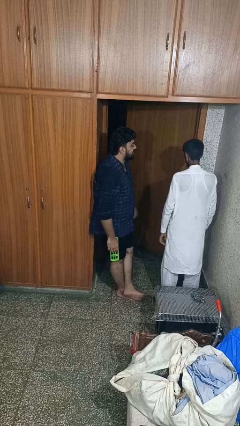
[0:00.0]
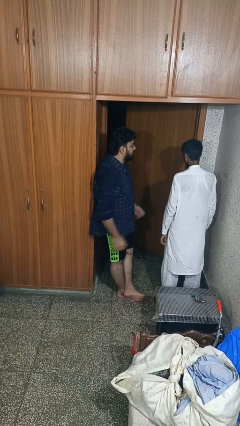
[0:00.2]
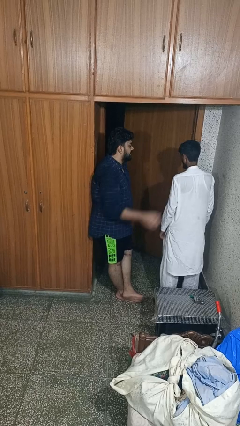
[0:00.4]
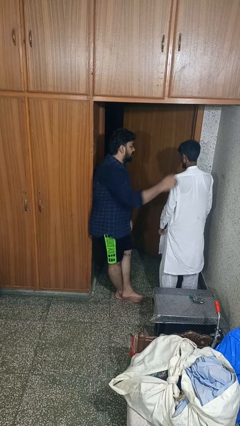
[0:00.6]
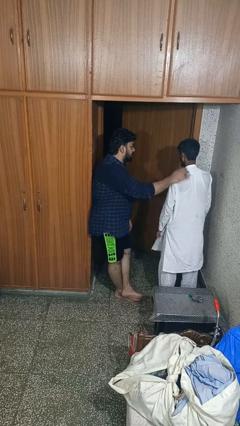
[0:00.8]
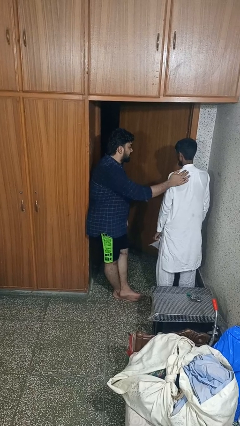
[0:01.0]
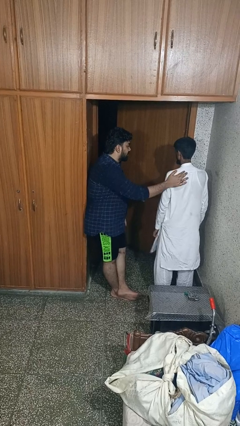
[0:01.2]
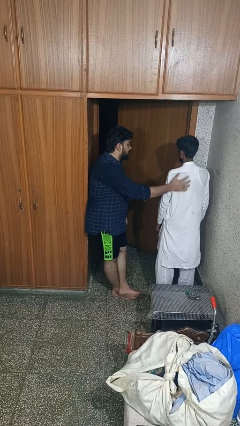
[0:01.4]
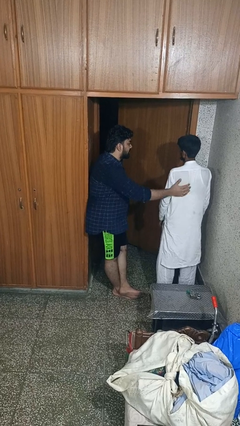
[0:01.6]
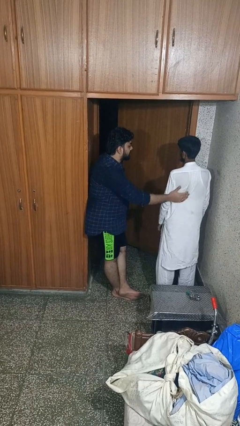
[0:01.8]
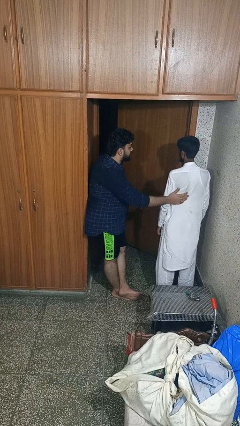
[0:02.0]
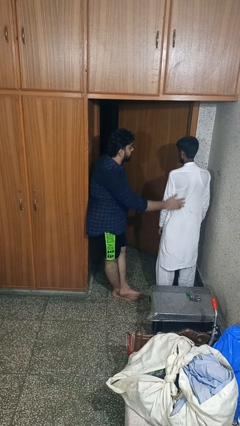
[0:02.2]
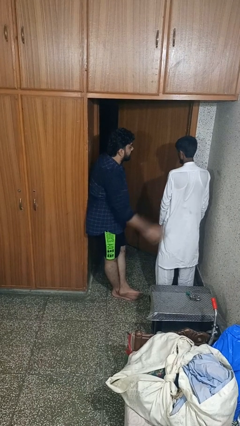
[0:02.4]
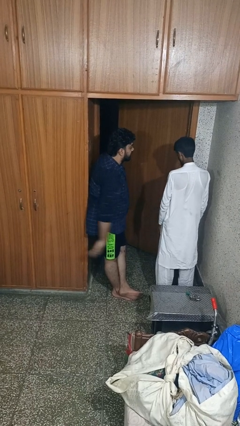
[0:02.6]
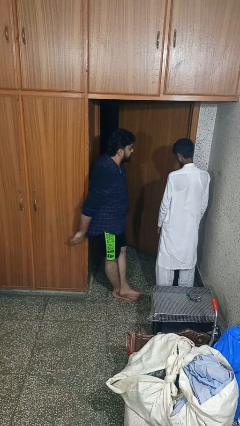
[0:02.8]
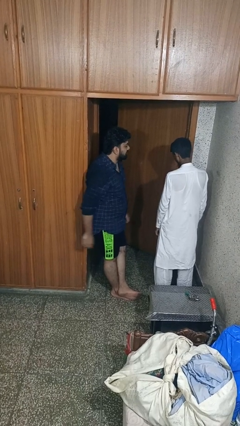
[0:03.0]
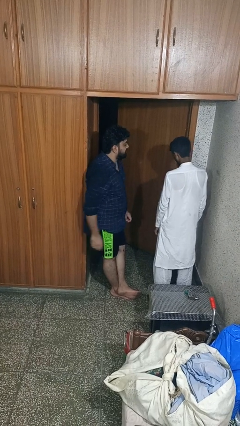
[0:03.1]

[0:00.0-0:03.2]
person touches back of person

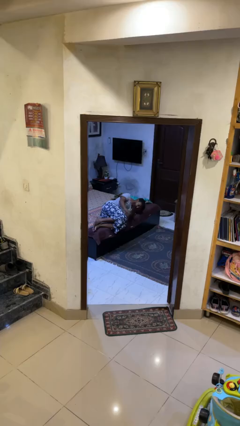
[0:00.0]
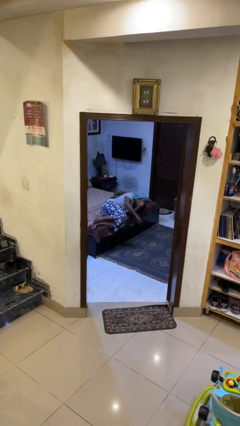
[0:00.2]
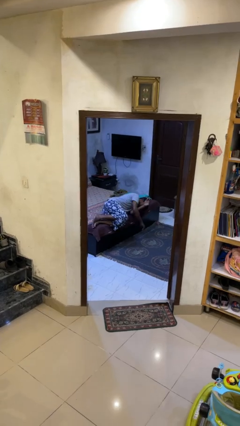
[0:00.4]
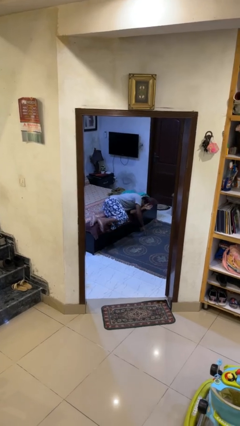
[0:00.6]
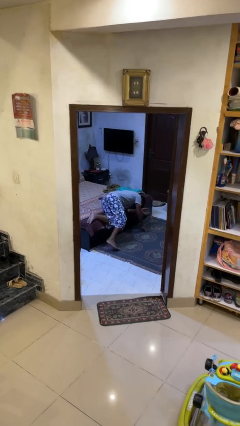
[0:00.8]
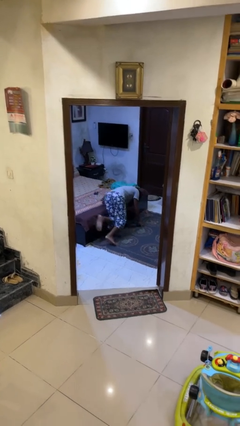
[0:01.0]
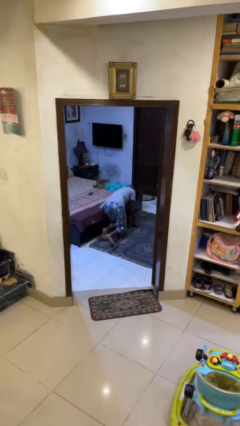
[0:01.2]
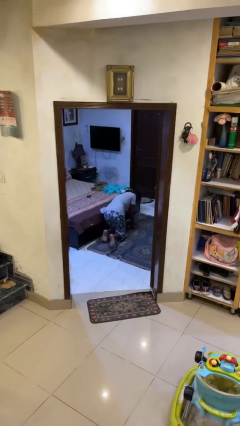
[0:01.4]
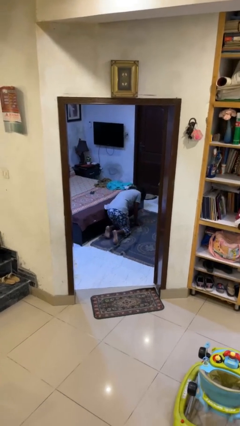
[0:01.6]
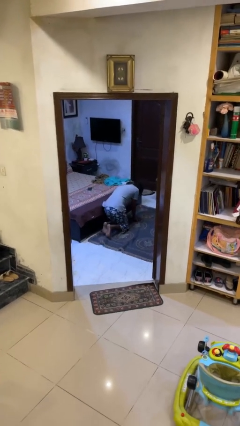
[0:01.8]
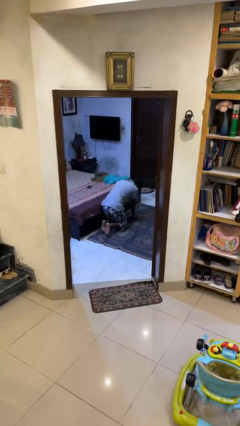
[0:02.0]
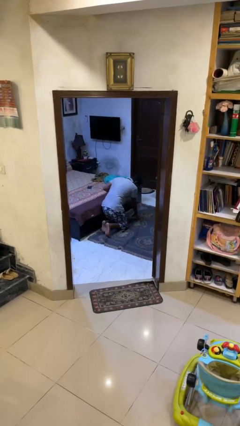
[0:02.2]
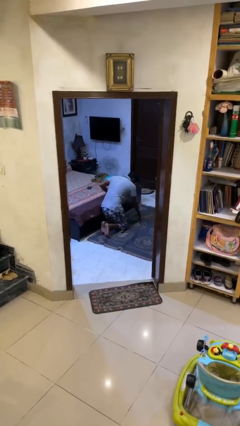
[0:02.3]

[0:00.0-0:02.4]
person falls from bed

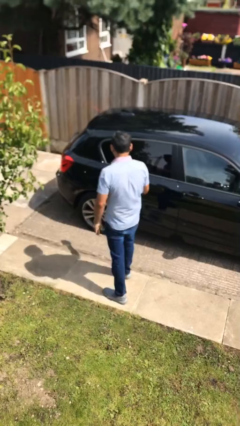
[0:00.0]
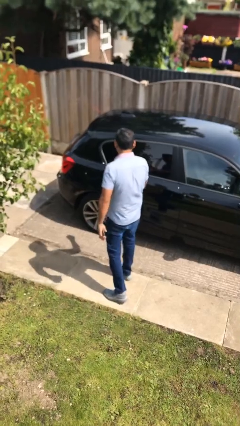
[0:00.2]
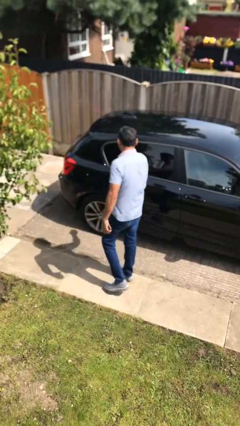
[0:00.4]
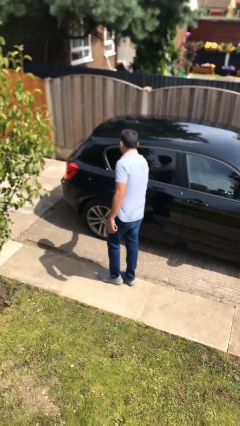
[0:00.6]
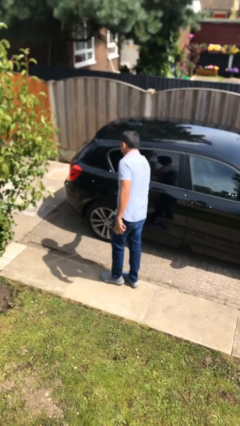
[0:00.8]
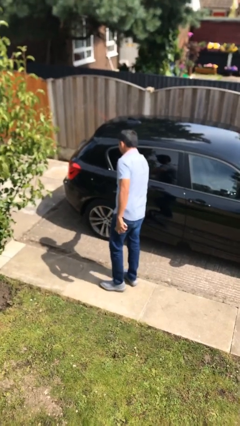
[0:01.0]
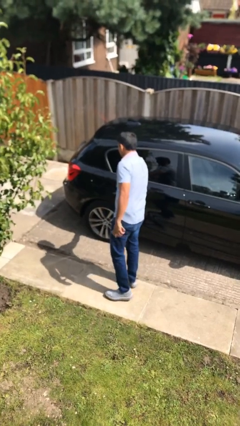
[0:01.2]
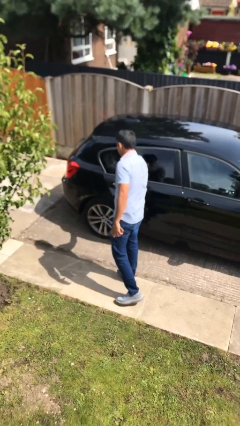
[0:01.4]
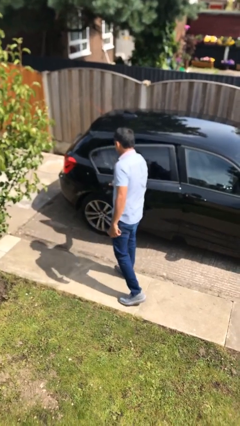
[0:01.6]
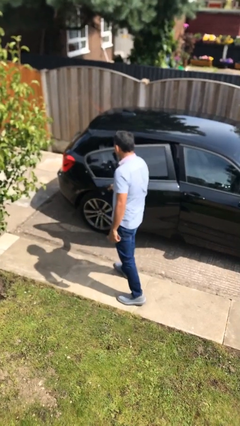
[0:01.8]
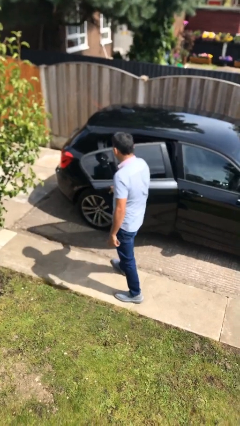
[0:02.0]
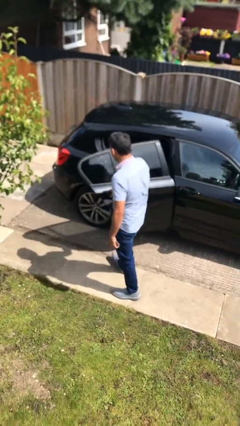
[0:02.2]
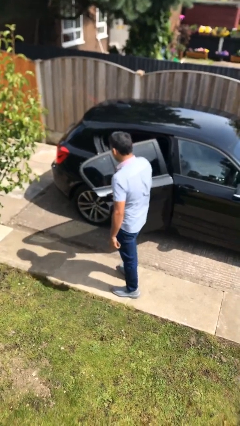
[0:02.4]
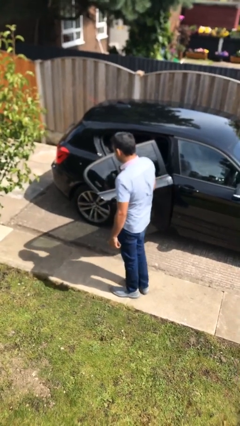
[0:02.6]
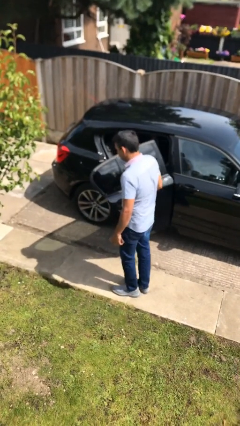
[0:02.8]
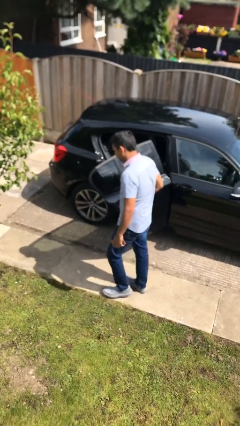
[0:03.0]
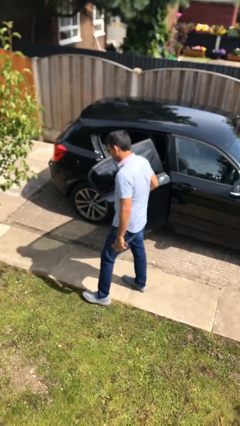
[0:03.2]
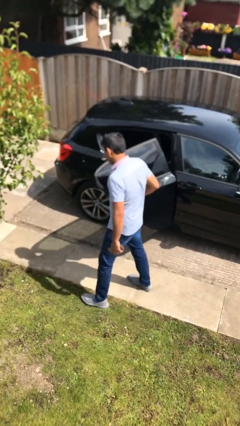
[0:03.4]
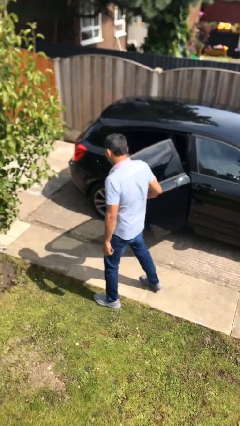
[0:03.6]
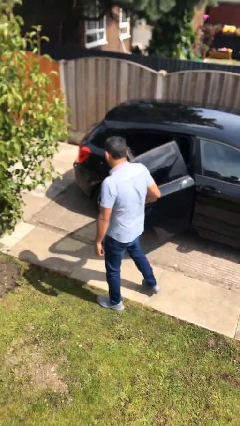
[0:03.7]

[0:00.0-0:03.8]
person opens car door

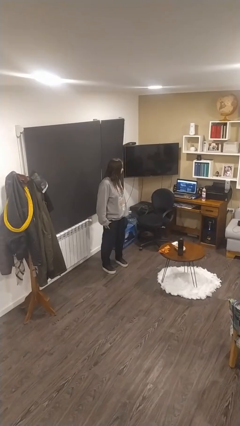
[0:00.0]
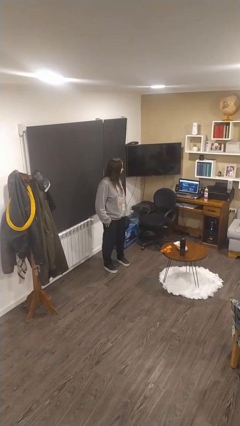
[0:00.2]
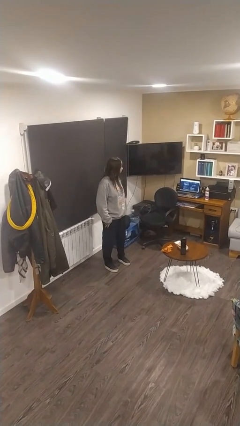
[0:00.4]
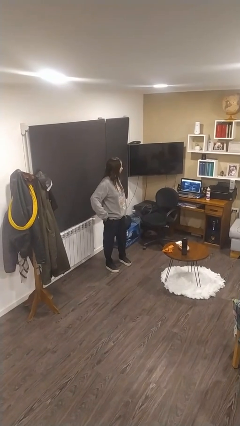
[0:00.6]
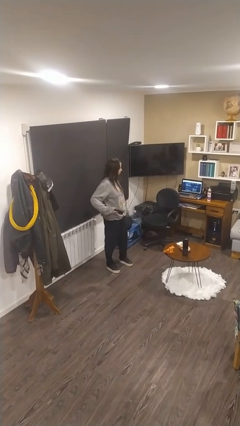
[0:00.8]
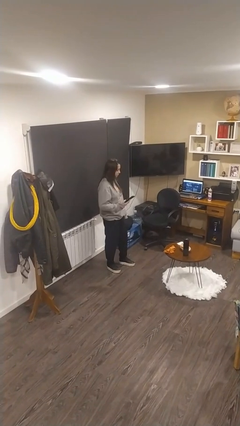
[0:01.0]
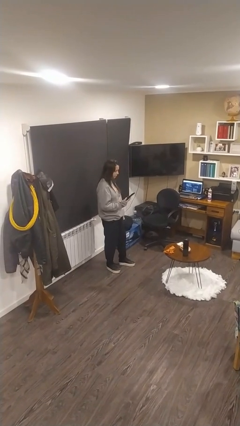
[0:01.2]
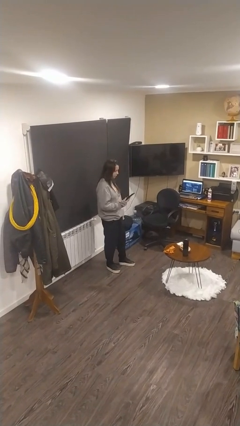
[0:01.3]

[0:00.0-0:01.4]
person takes phone from pocket

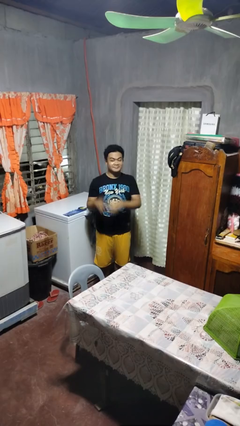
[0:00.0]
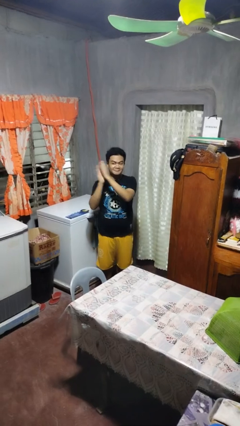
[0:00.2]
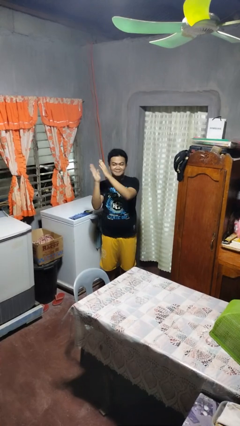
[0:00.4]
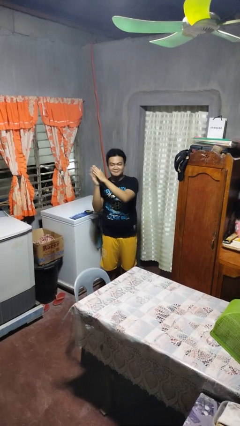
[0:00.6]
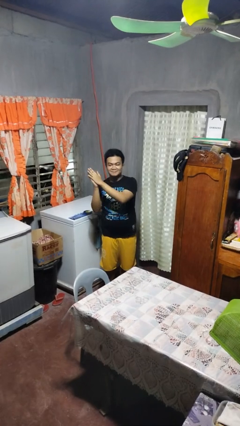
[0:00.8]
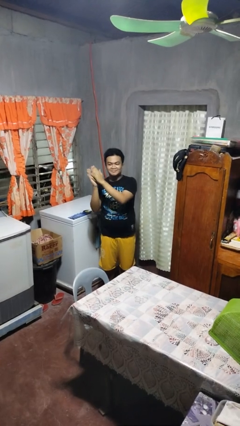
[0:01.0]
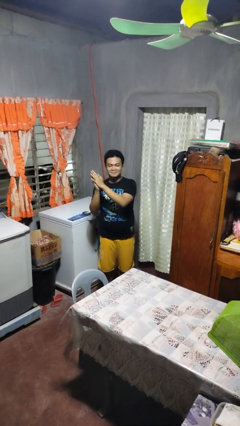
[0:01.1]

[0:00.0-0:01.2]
person claps hands

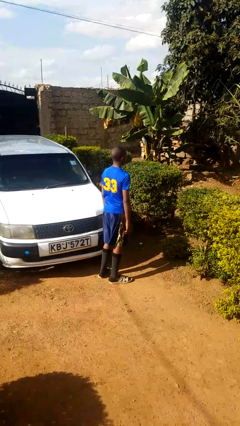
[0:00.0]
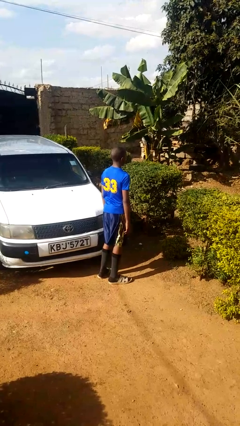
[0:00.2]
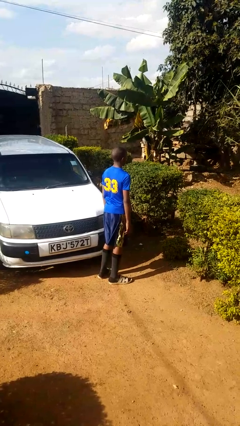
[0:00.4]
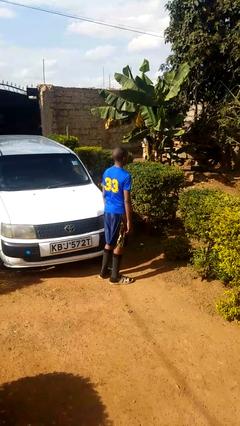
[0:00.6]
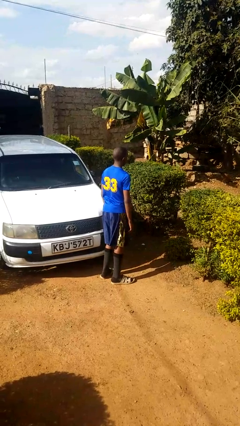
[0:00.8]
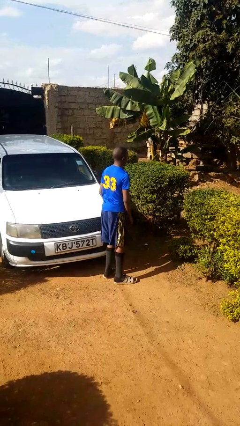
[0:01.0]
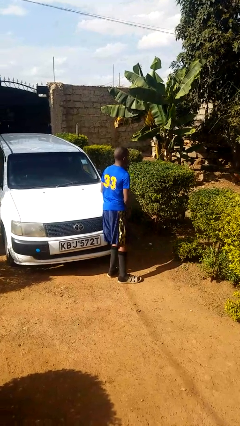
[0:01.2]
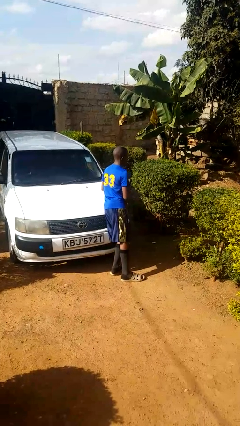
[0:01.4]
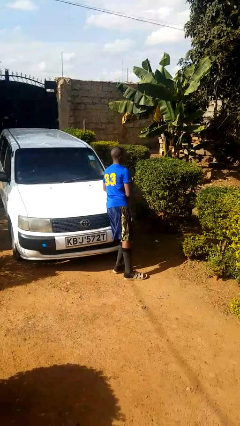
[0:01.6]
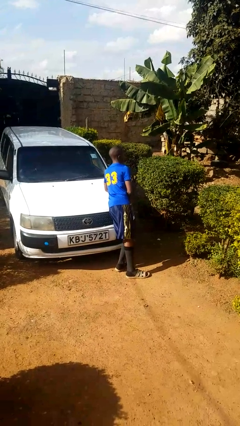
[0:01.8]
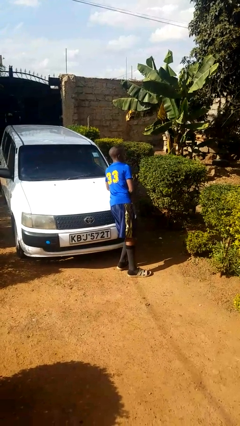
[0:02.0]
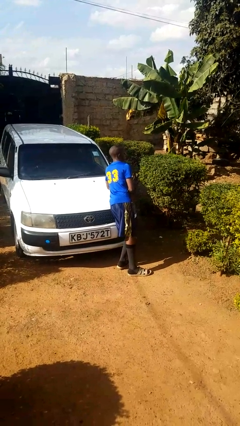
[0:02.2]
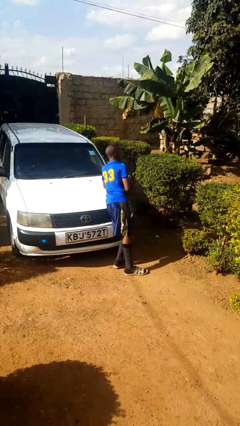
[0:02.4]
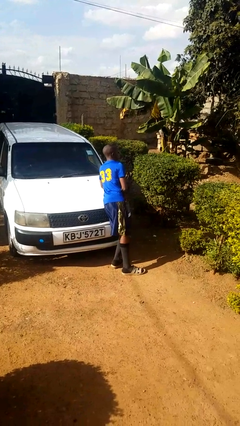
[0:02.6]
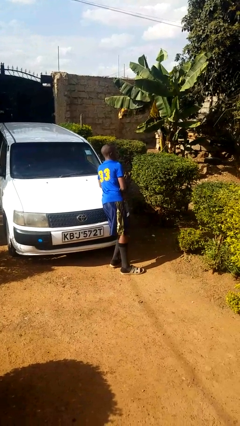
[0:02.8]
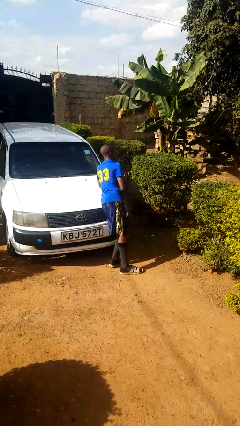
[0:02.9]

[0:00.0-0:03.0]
person leans against car

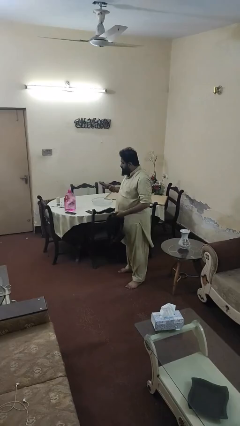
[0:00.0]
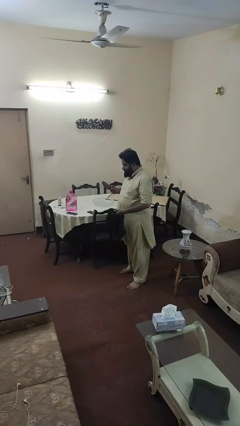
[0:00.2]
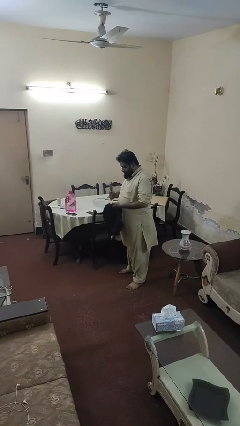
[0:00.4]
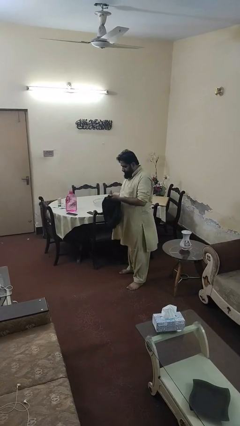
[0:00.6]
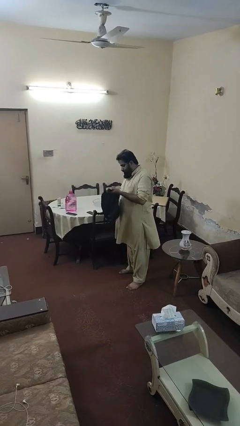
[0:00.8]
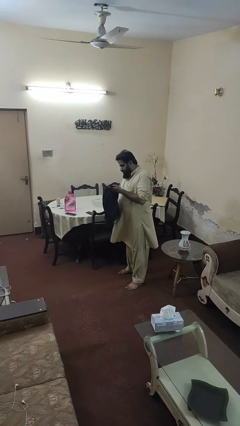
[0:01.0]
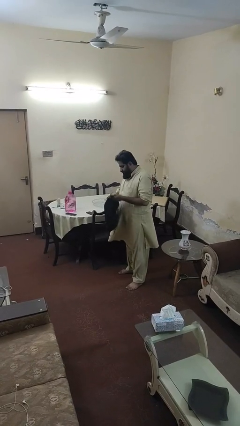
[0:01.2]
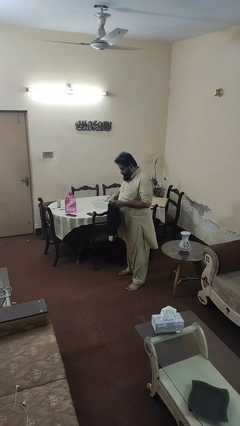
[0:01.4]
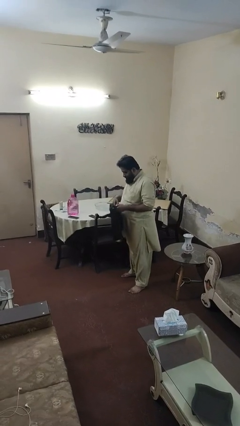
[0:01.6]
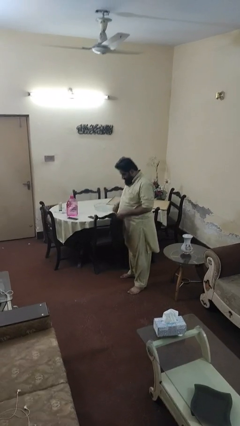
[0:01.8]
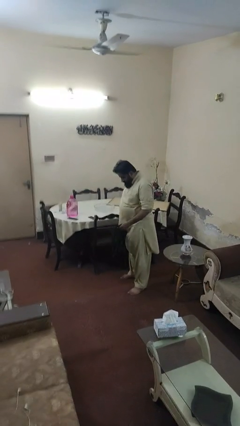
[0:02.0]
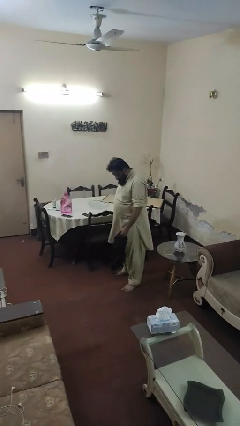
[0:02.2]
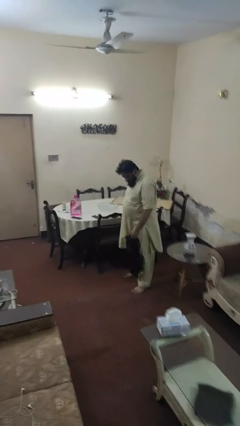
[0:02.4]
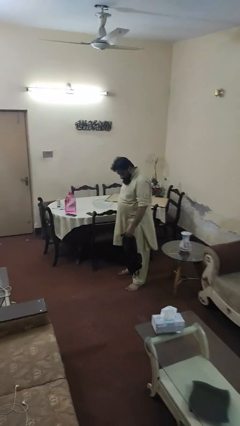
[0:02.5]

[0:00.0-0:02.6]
person puts object into backpack
